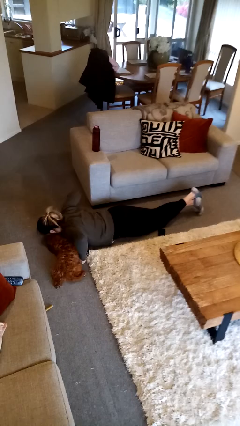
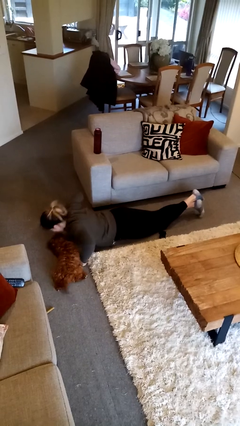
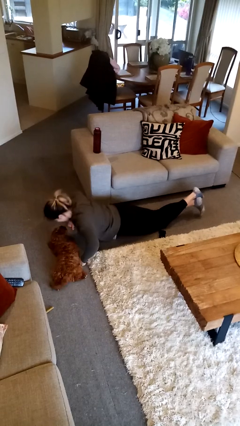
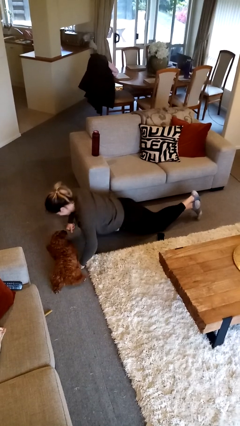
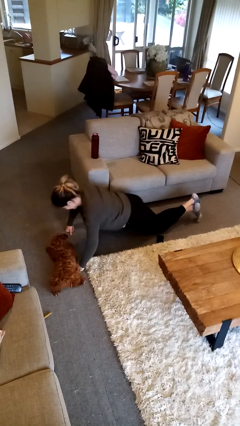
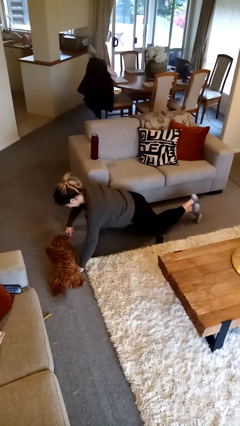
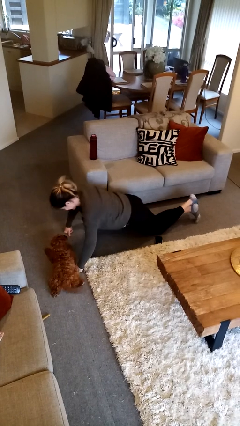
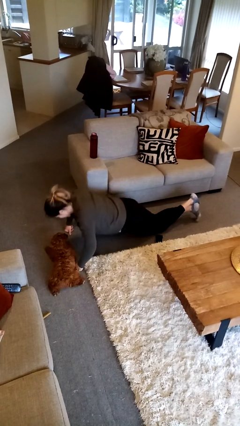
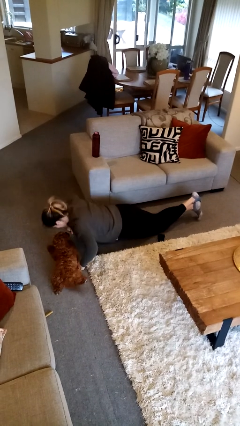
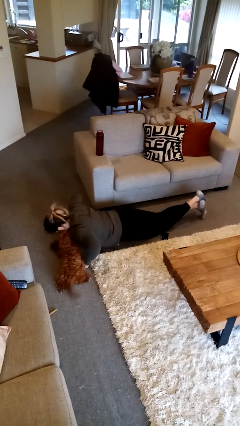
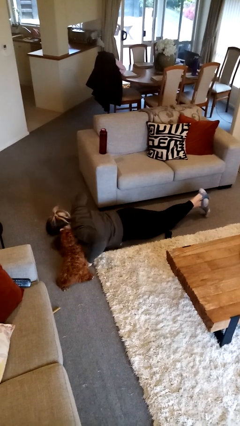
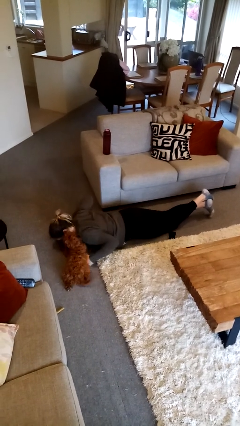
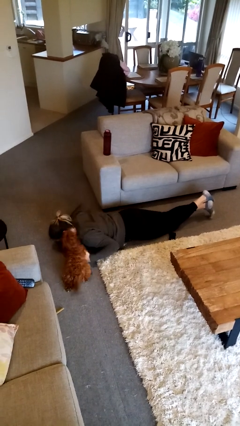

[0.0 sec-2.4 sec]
person exercises with pushup

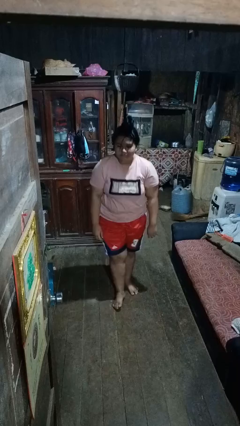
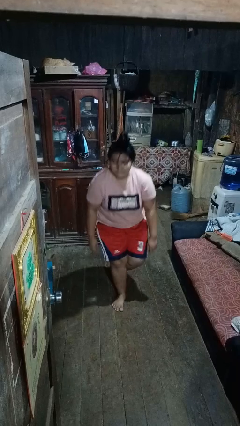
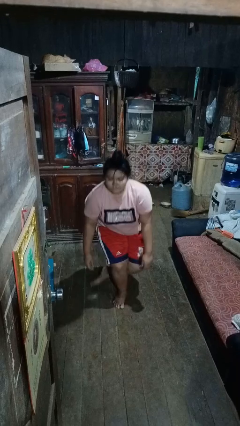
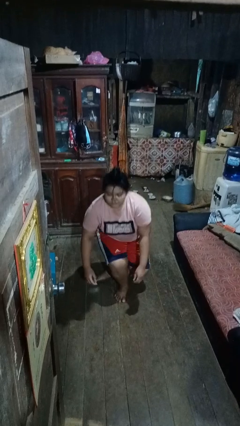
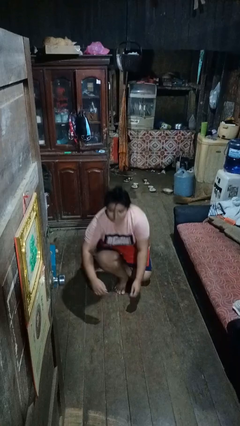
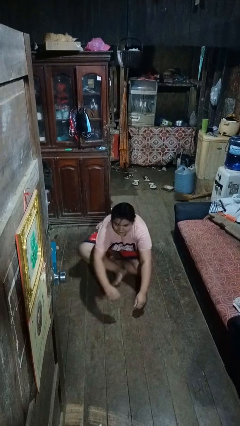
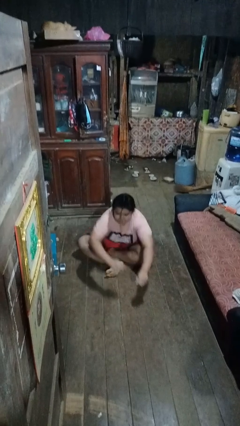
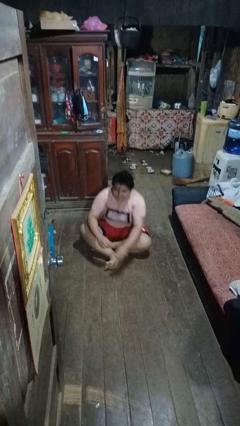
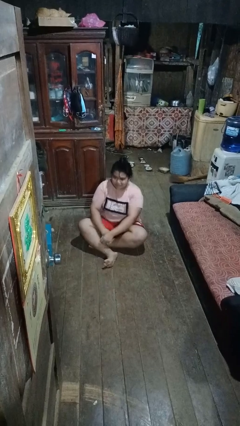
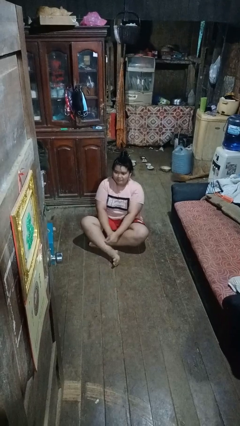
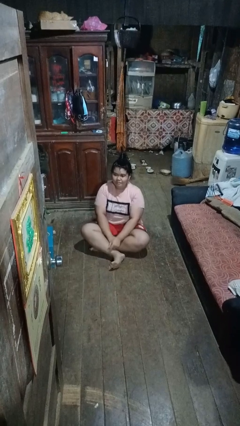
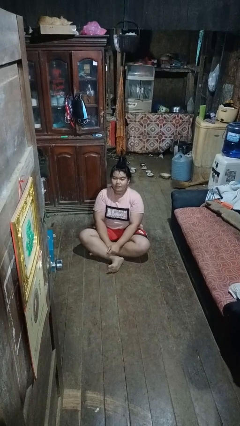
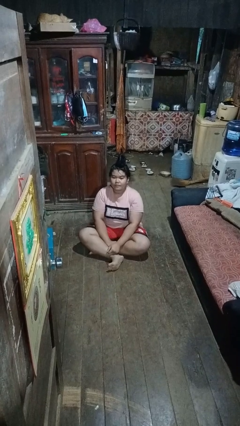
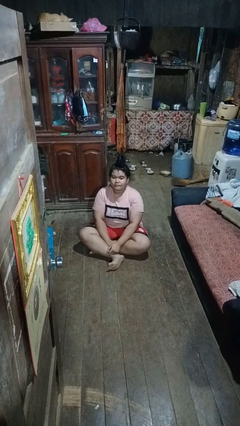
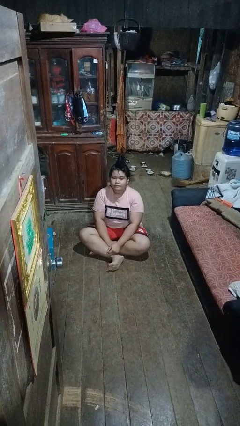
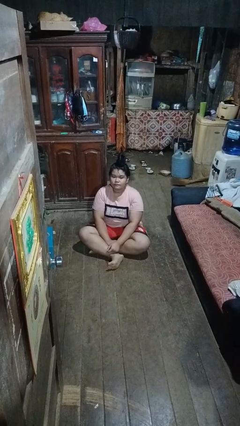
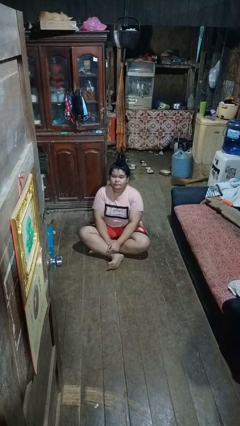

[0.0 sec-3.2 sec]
person sits crisscross

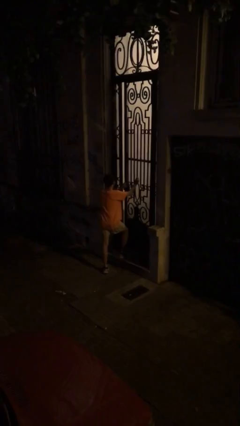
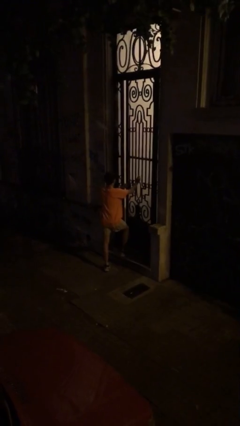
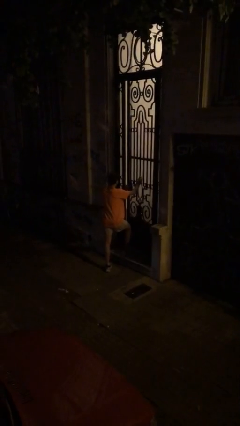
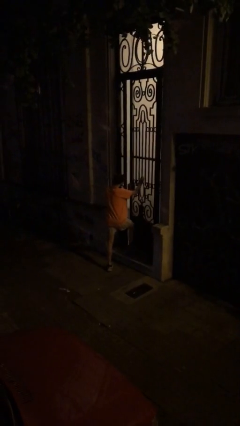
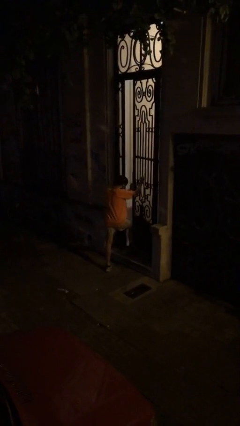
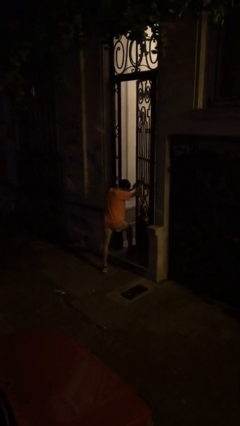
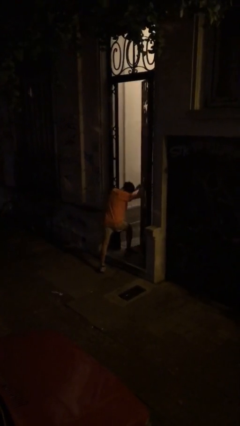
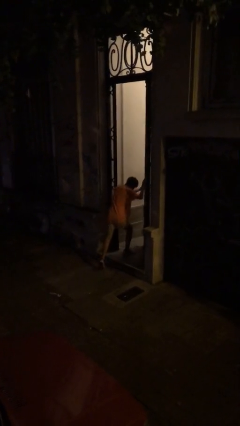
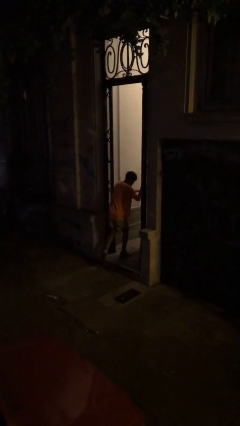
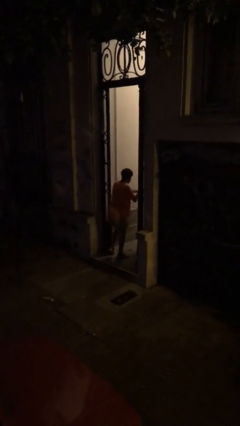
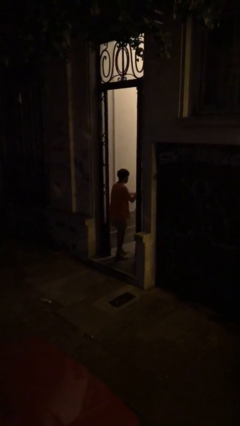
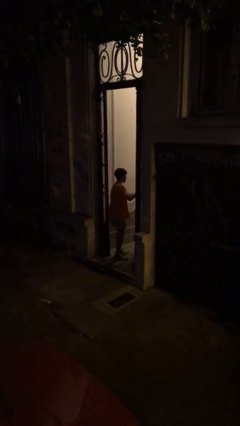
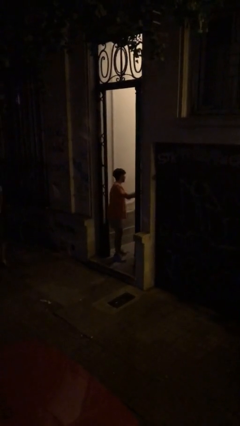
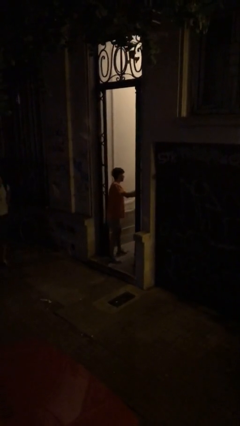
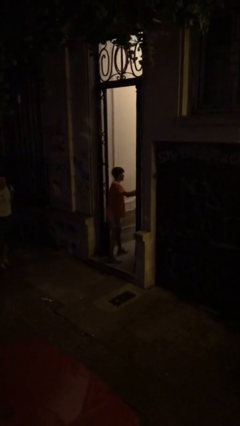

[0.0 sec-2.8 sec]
person opens facility door

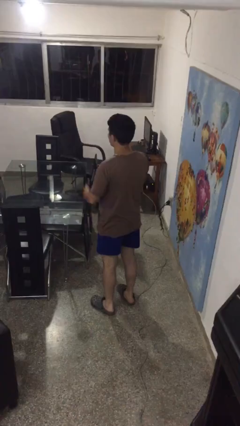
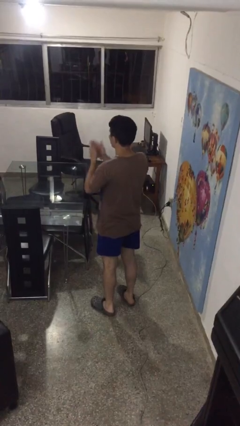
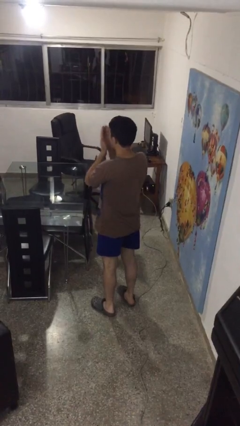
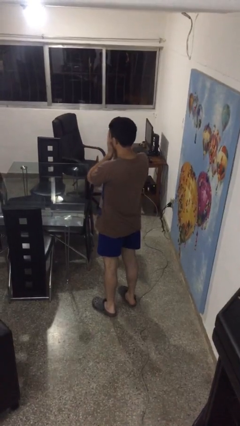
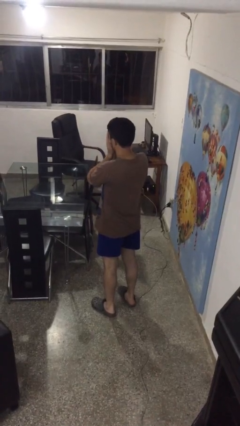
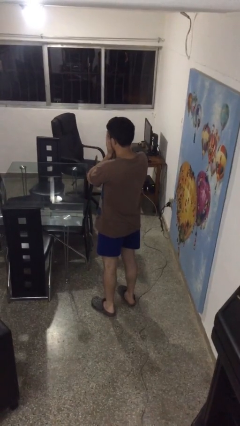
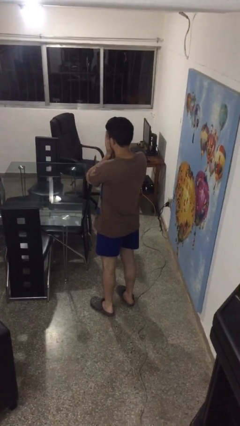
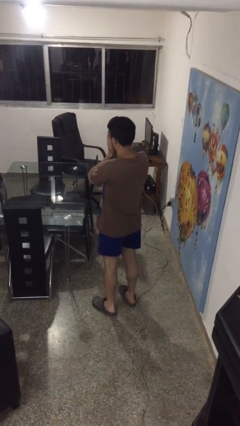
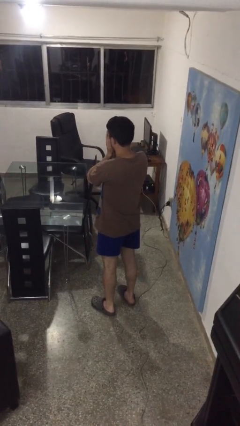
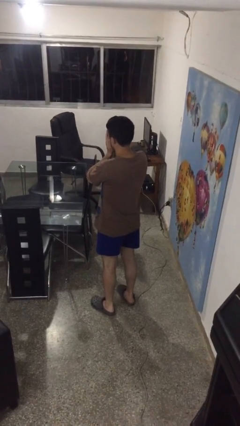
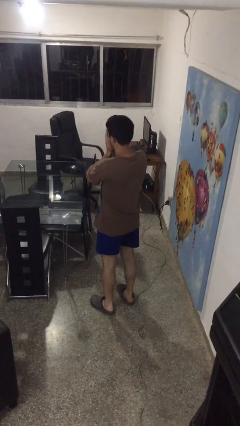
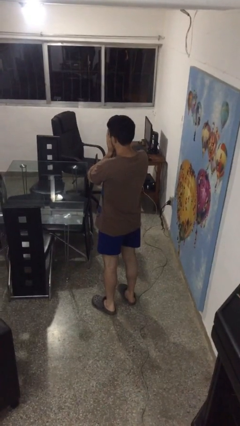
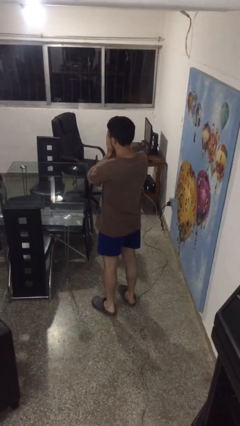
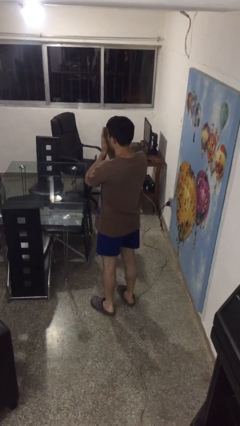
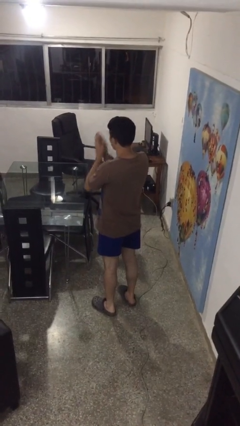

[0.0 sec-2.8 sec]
person covers face with hands

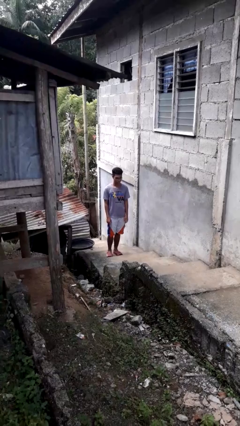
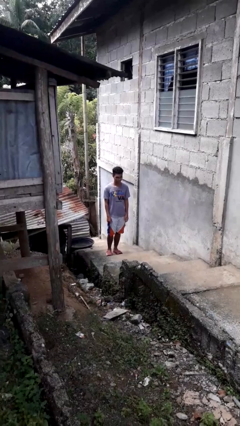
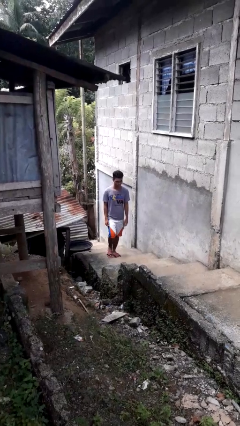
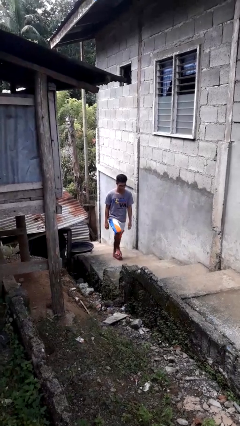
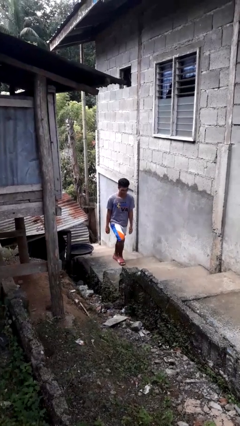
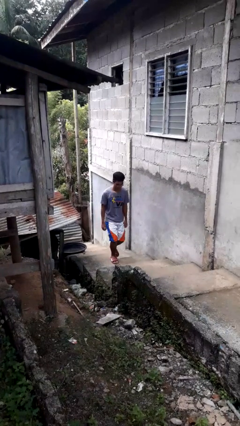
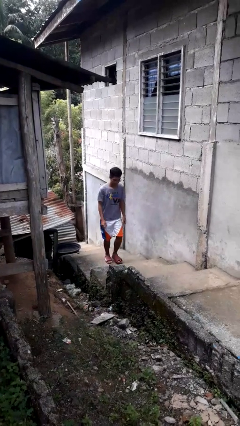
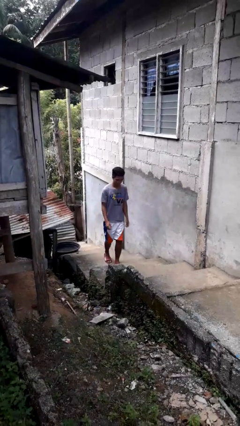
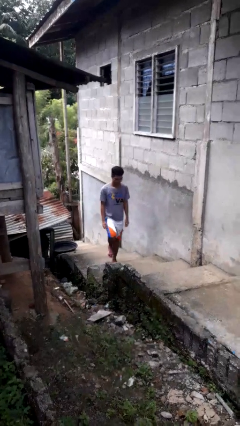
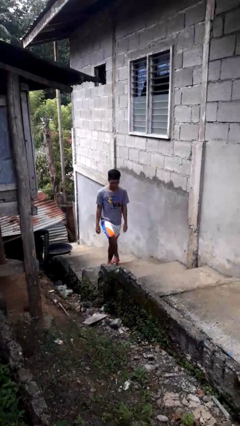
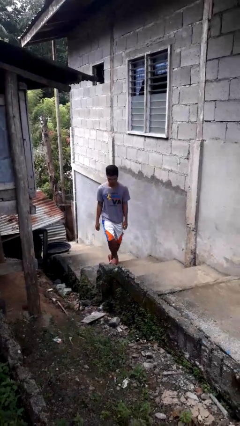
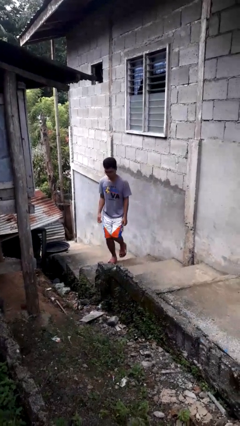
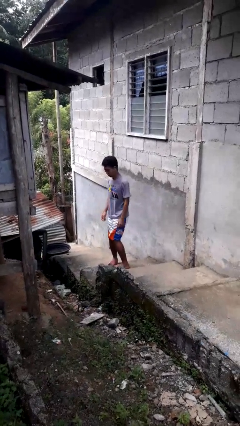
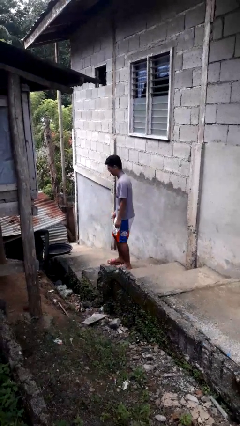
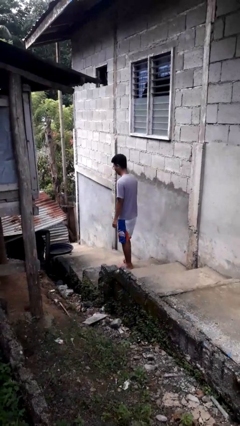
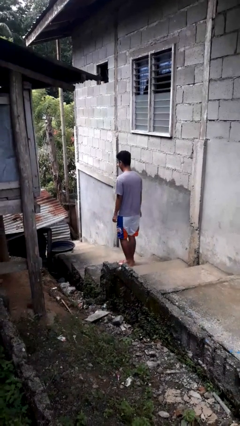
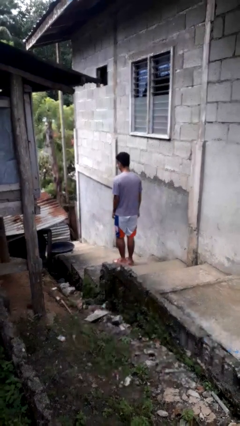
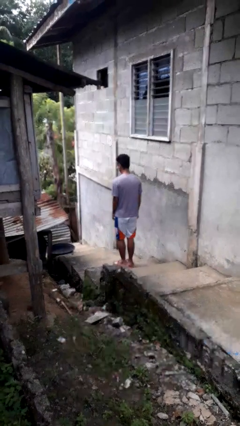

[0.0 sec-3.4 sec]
person climbs up stairs

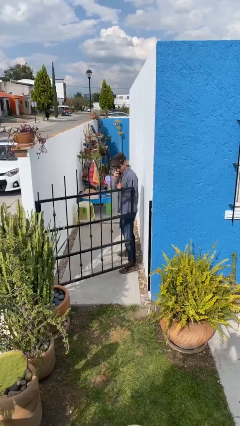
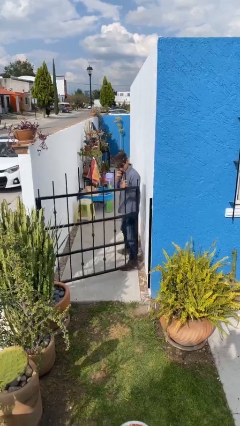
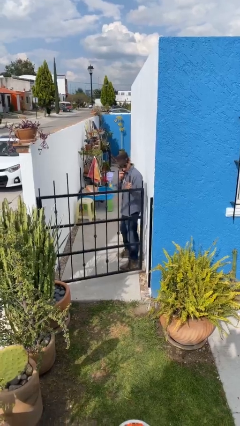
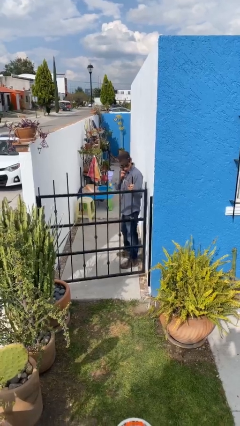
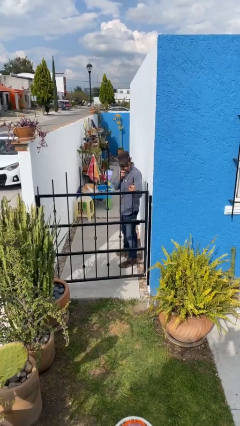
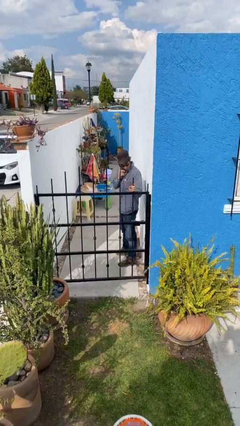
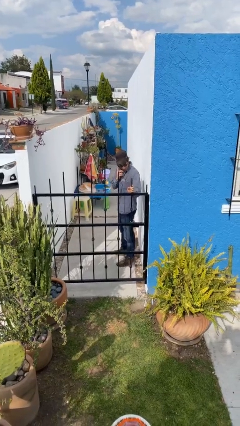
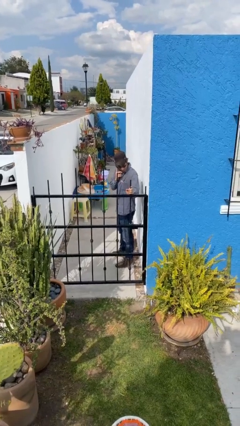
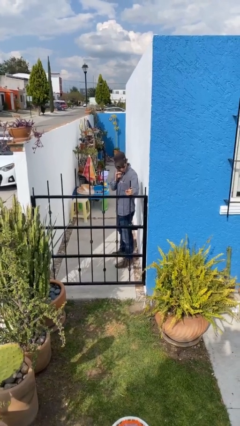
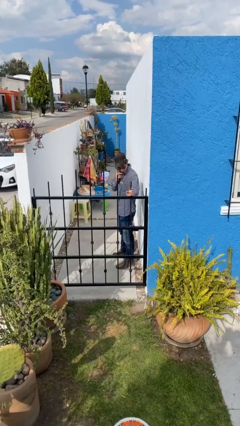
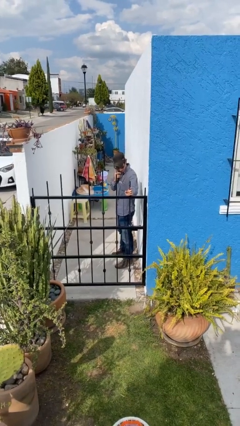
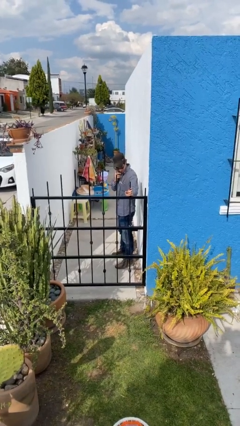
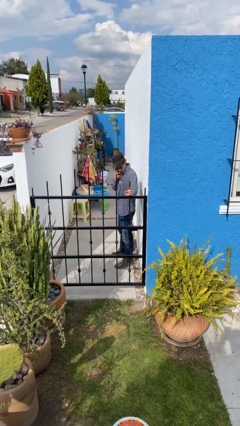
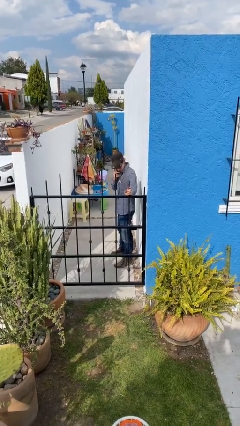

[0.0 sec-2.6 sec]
person closes facility door

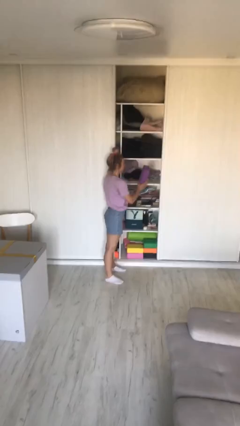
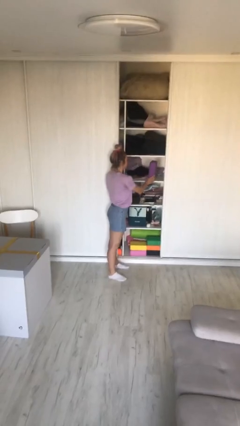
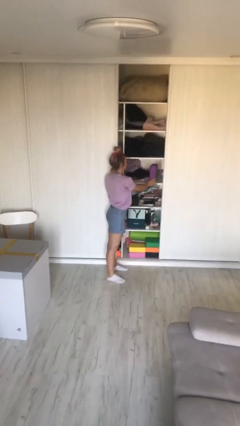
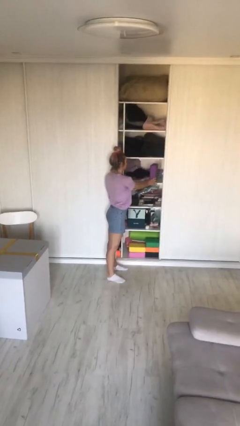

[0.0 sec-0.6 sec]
person puts down object into cabinet
